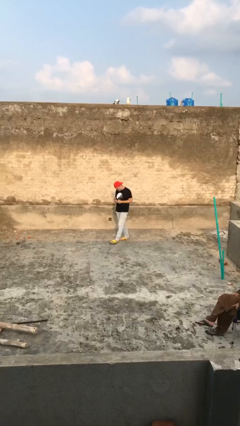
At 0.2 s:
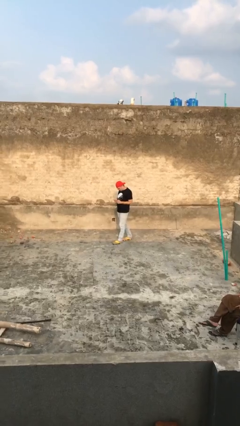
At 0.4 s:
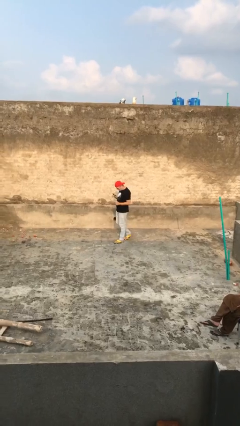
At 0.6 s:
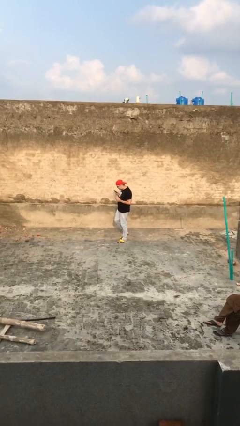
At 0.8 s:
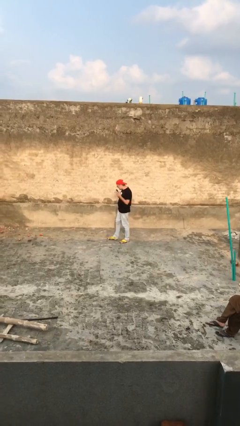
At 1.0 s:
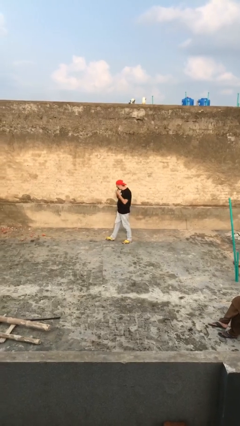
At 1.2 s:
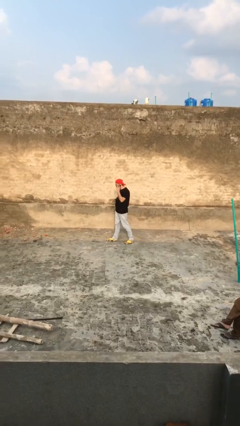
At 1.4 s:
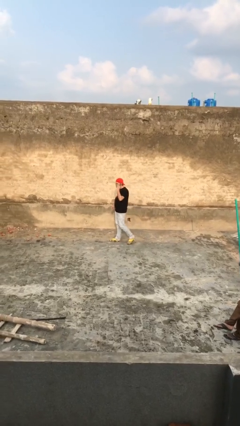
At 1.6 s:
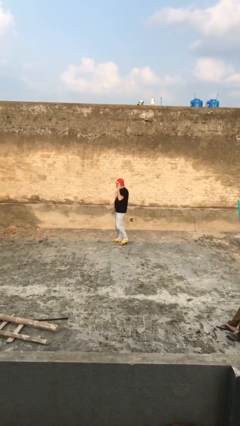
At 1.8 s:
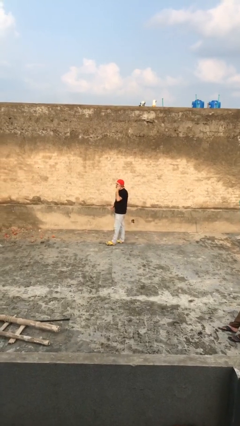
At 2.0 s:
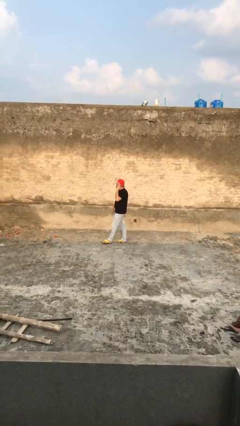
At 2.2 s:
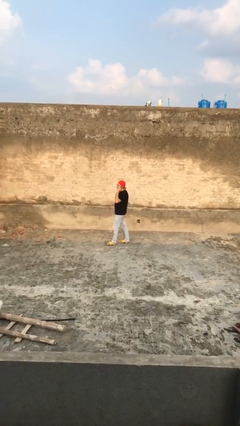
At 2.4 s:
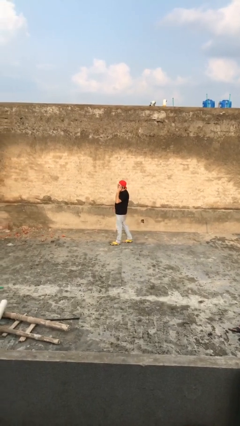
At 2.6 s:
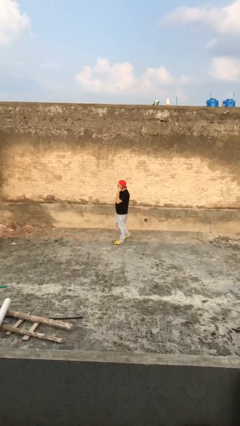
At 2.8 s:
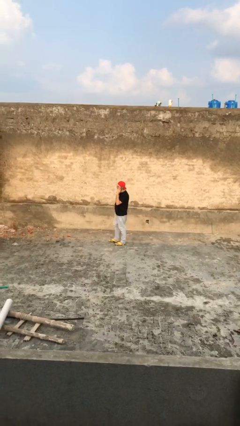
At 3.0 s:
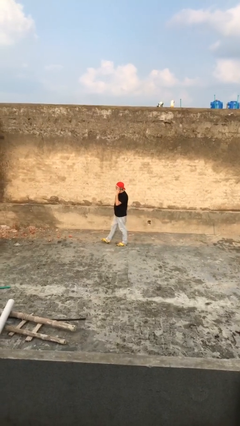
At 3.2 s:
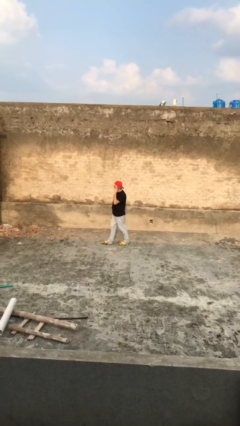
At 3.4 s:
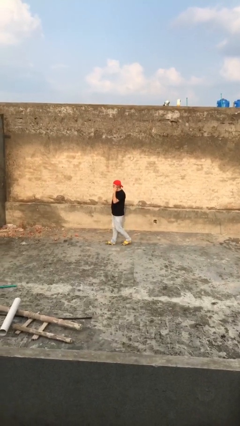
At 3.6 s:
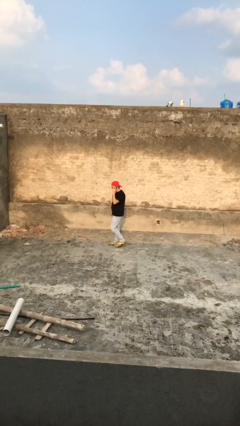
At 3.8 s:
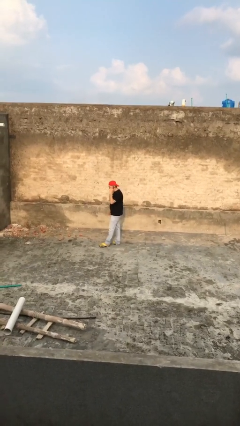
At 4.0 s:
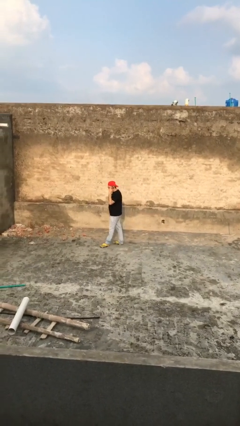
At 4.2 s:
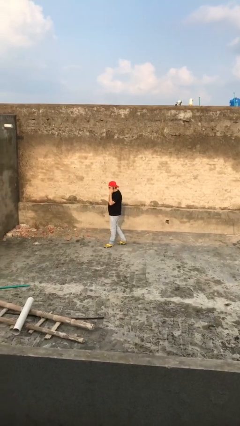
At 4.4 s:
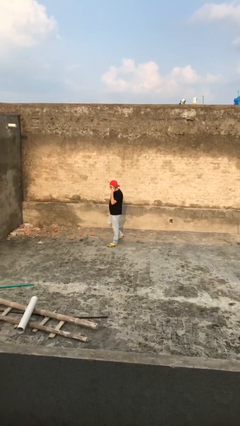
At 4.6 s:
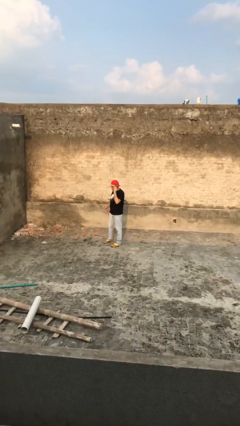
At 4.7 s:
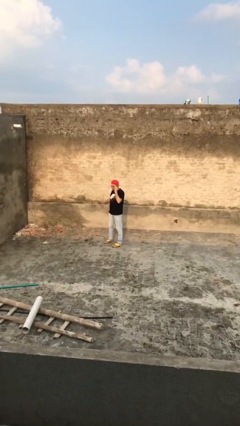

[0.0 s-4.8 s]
person talks on phone

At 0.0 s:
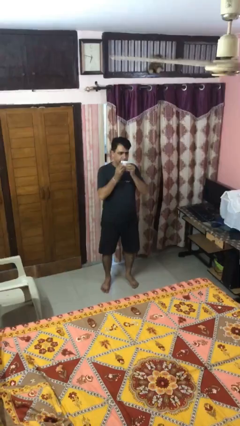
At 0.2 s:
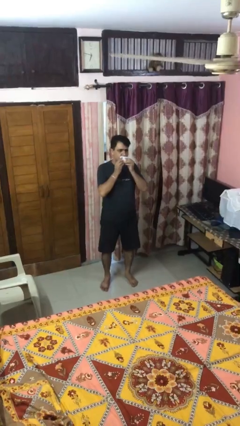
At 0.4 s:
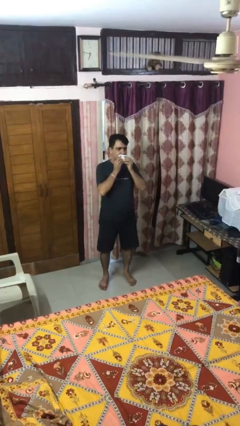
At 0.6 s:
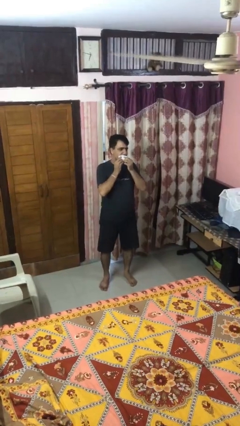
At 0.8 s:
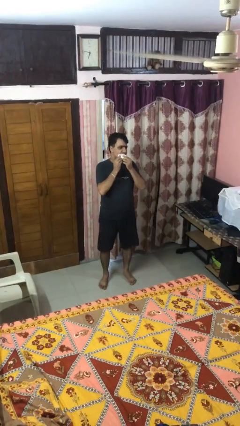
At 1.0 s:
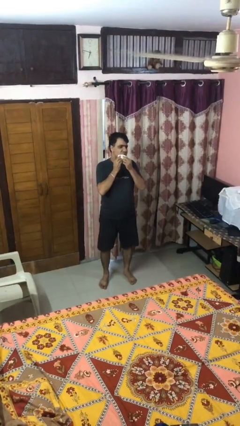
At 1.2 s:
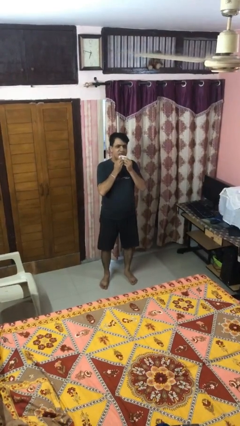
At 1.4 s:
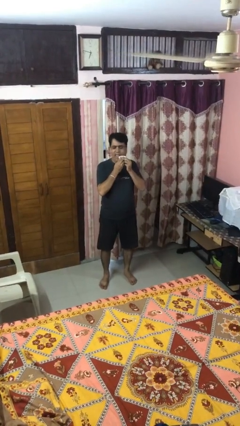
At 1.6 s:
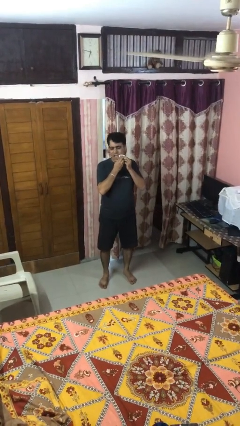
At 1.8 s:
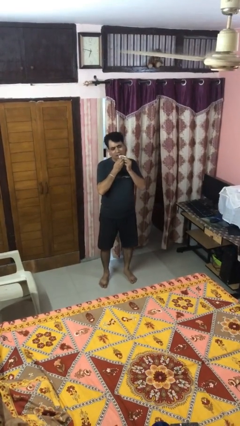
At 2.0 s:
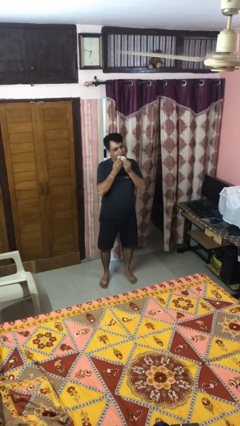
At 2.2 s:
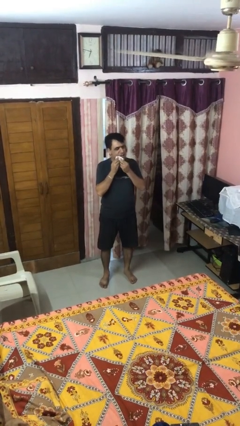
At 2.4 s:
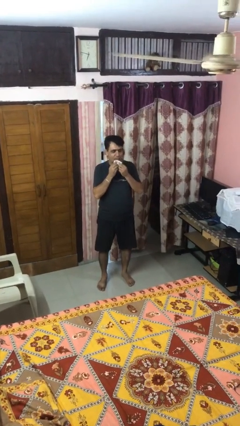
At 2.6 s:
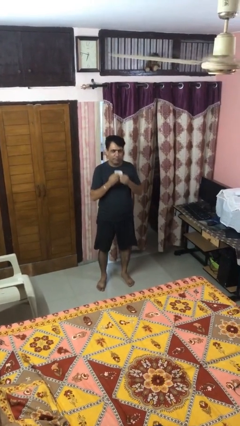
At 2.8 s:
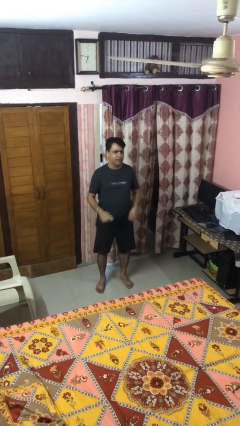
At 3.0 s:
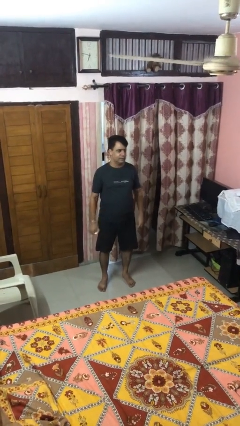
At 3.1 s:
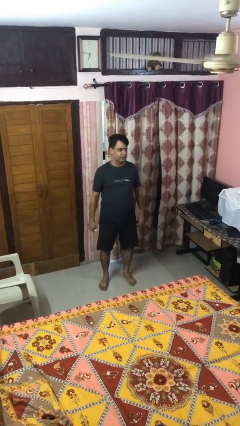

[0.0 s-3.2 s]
person wipes mouth with napkin

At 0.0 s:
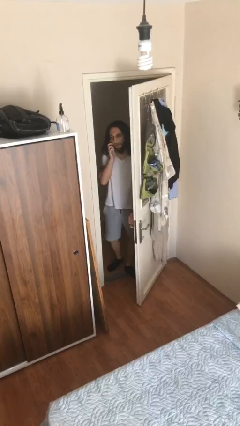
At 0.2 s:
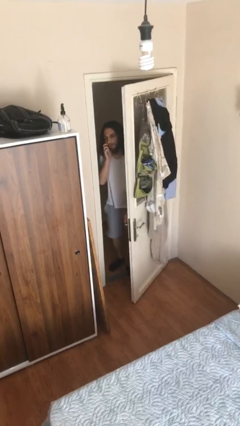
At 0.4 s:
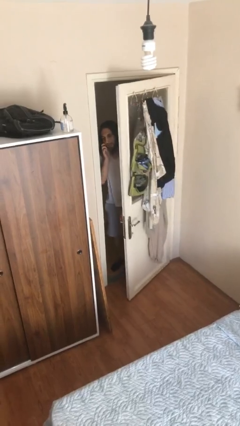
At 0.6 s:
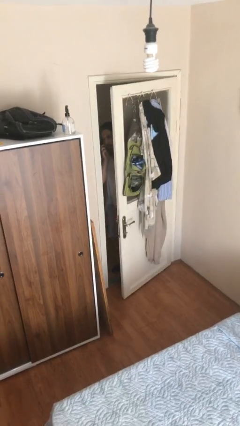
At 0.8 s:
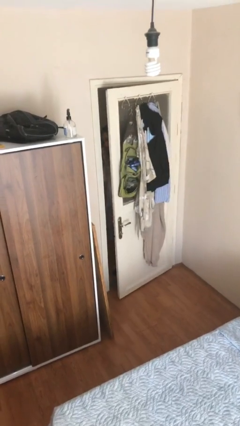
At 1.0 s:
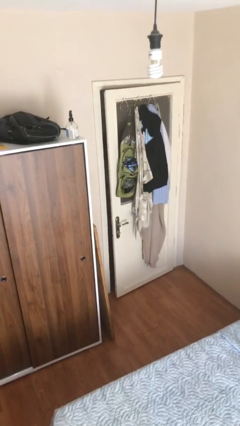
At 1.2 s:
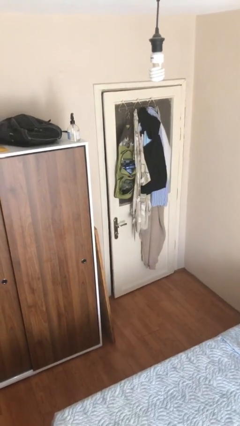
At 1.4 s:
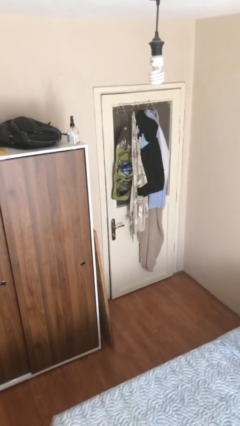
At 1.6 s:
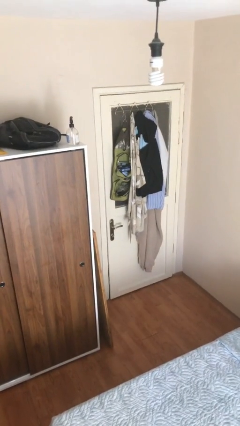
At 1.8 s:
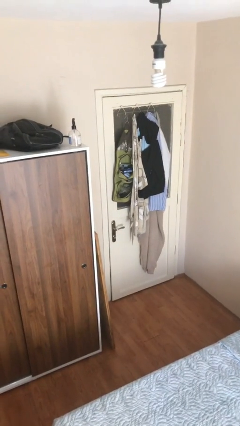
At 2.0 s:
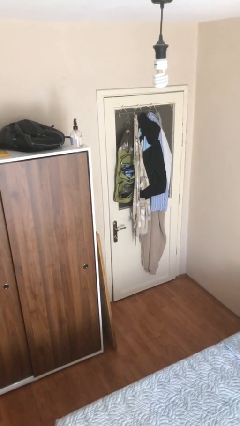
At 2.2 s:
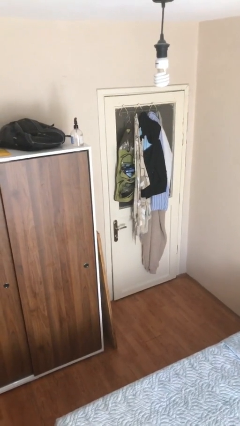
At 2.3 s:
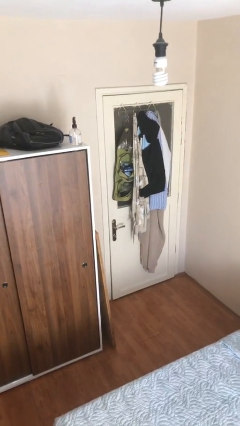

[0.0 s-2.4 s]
person closes facility door

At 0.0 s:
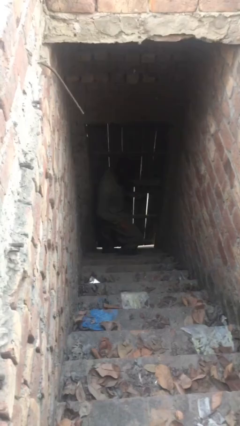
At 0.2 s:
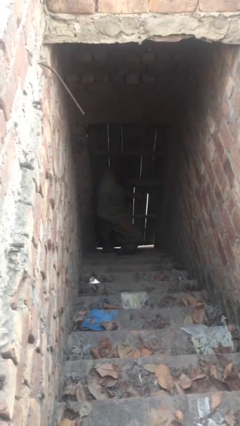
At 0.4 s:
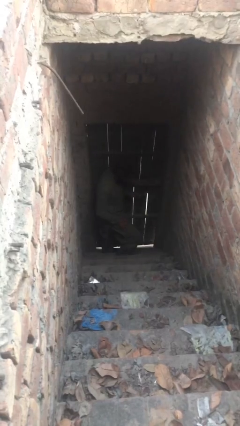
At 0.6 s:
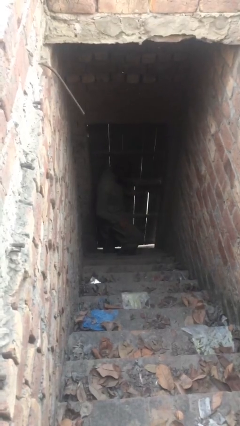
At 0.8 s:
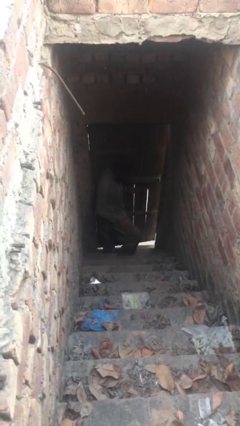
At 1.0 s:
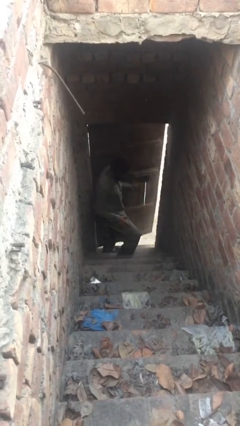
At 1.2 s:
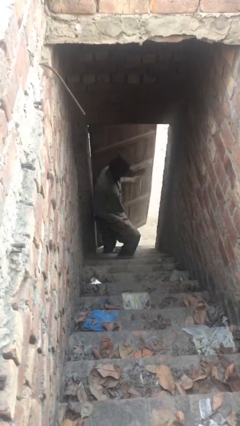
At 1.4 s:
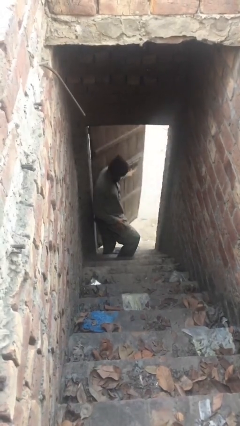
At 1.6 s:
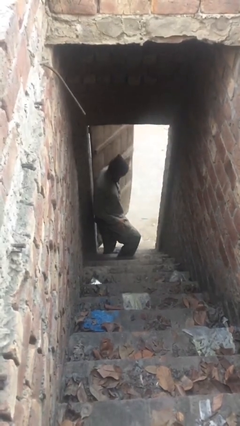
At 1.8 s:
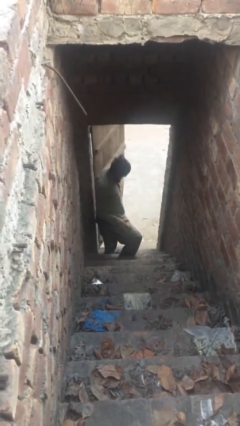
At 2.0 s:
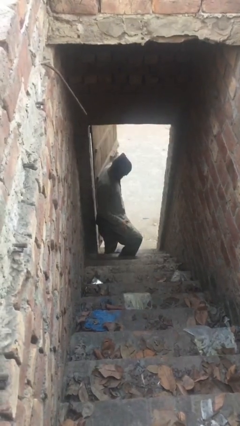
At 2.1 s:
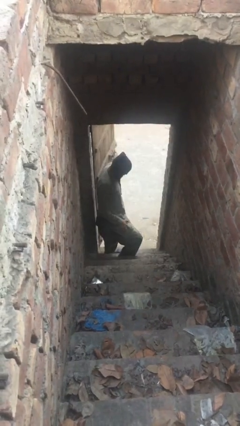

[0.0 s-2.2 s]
person opens facility door

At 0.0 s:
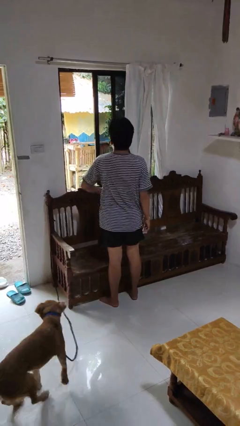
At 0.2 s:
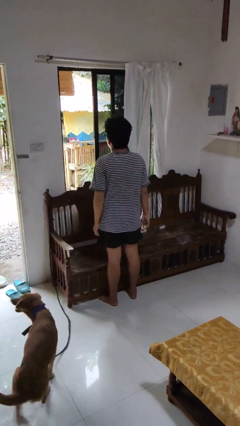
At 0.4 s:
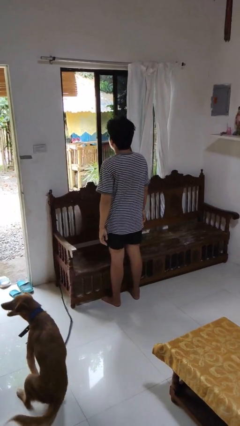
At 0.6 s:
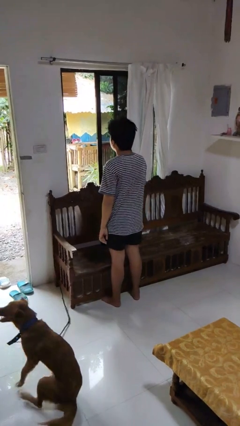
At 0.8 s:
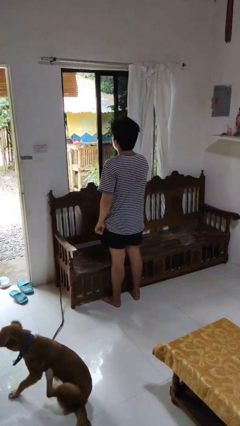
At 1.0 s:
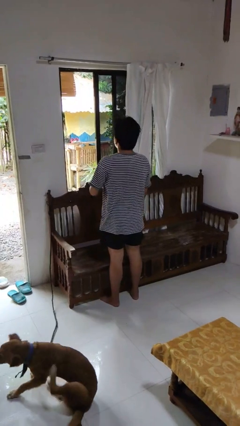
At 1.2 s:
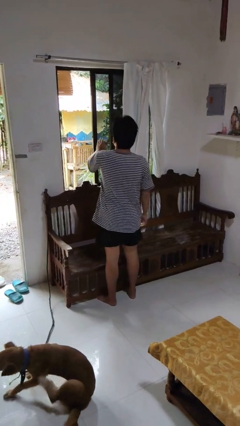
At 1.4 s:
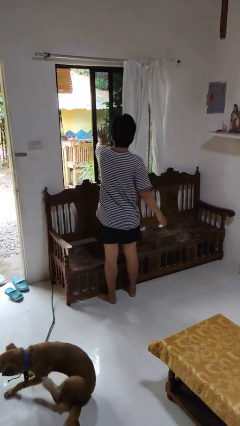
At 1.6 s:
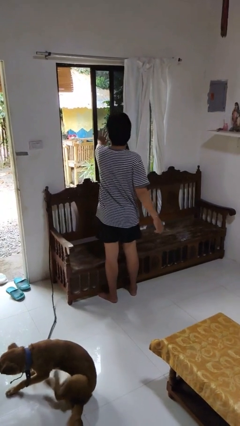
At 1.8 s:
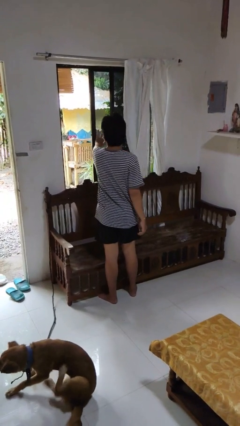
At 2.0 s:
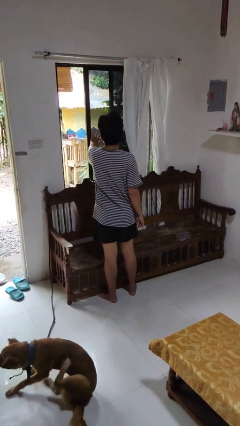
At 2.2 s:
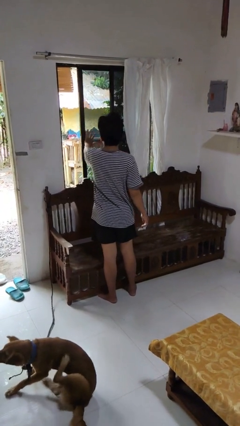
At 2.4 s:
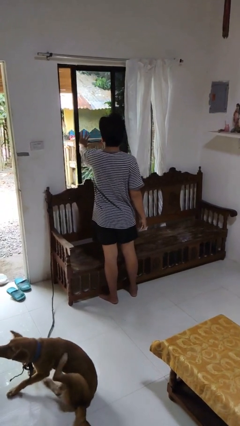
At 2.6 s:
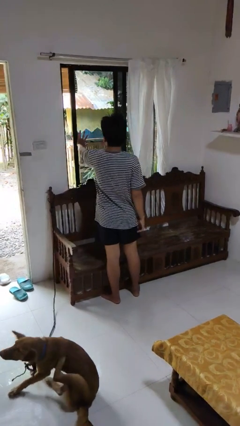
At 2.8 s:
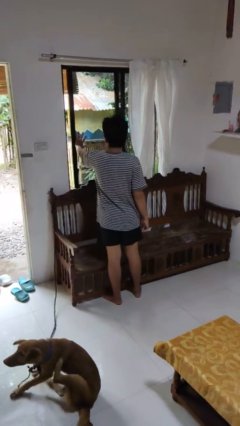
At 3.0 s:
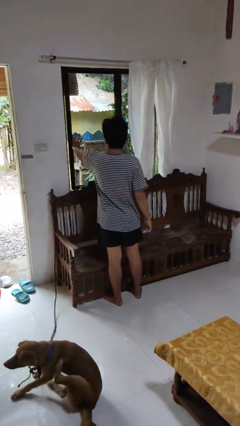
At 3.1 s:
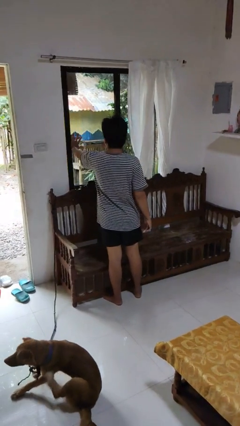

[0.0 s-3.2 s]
person closes home window

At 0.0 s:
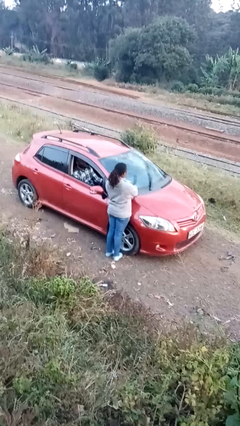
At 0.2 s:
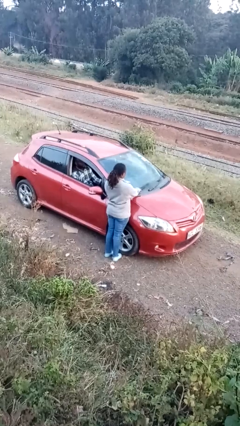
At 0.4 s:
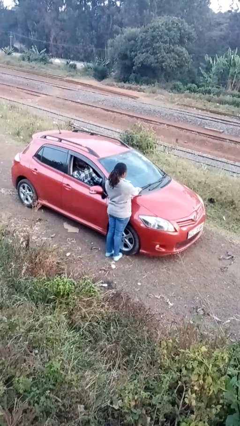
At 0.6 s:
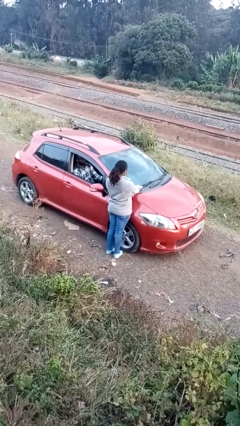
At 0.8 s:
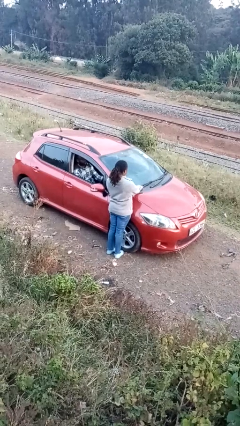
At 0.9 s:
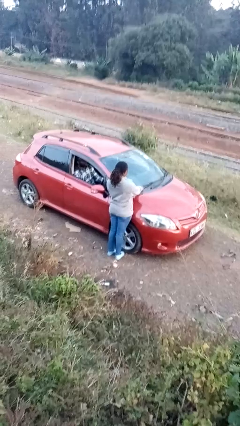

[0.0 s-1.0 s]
person flips down car wipers

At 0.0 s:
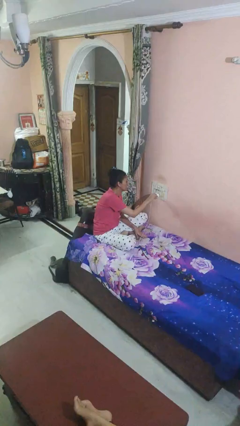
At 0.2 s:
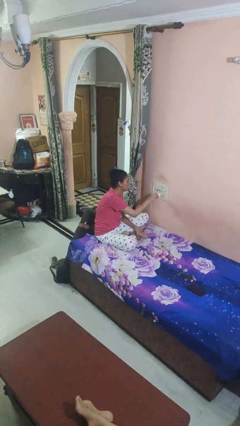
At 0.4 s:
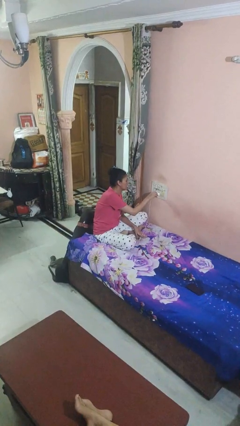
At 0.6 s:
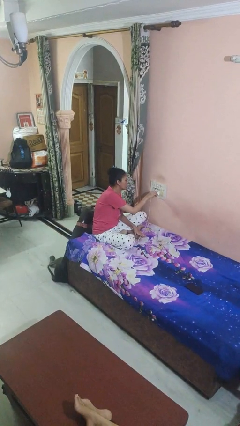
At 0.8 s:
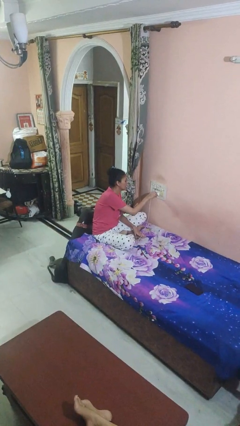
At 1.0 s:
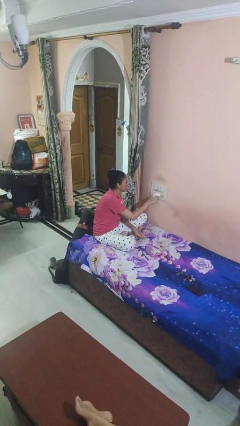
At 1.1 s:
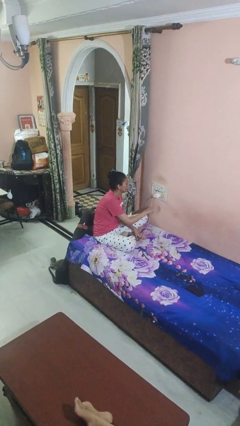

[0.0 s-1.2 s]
person plugs into electrical socket
